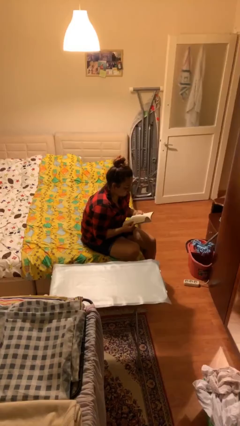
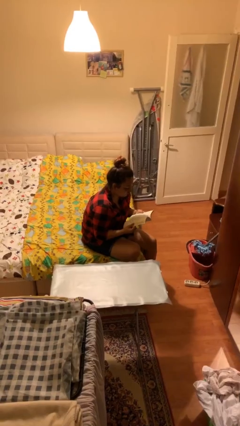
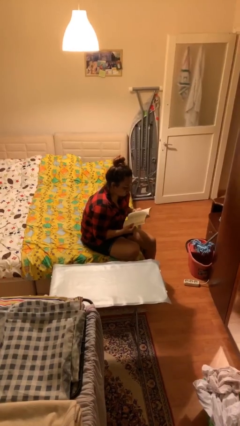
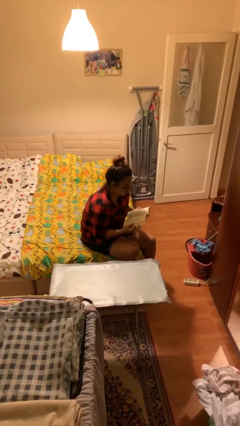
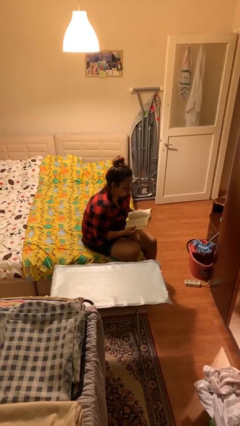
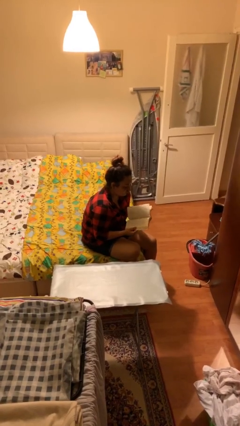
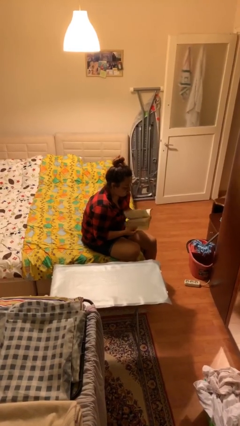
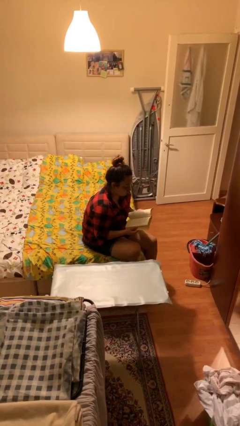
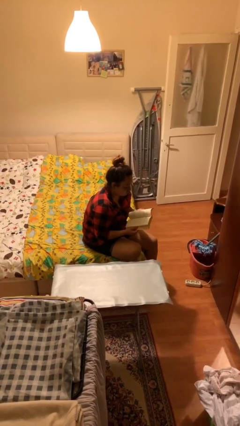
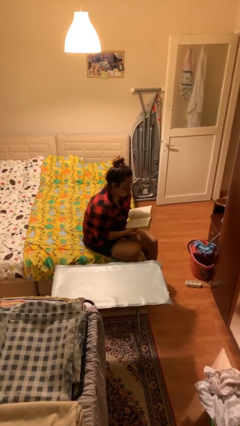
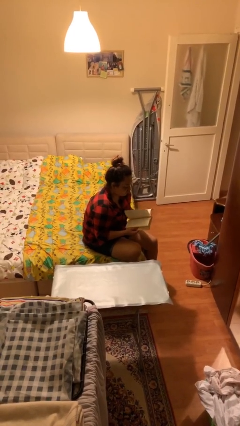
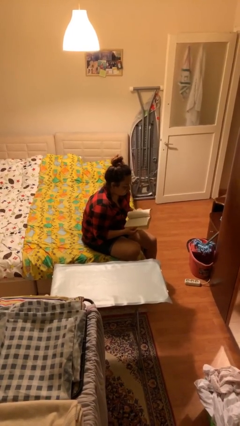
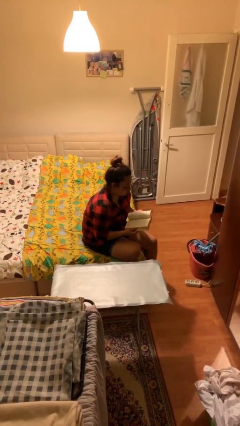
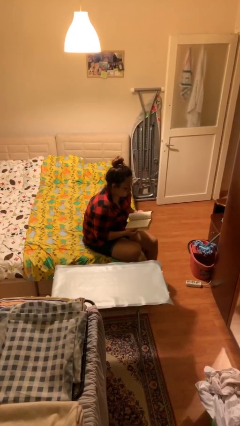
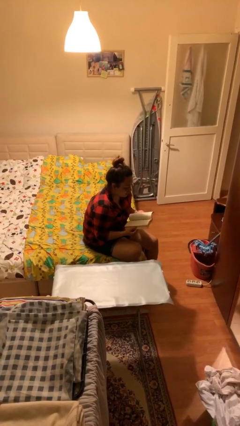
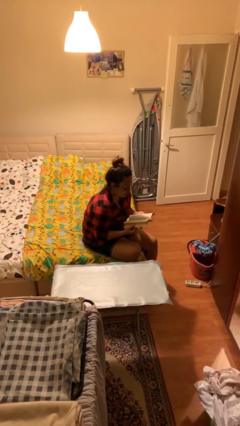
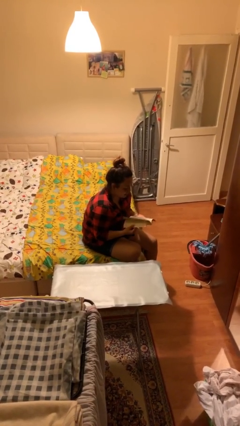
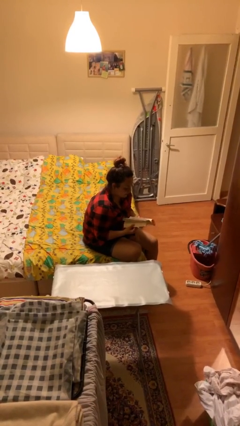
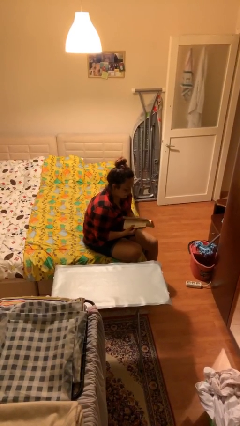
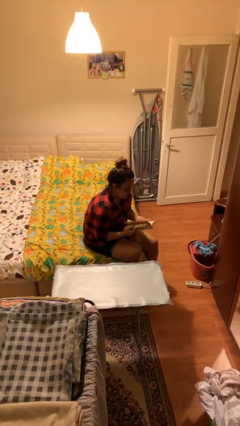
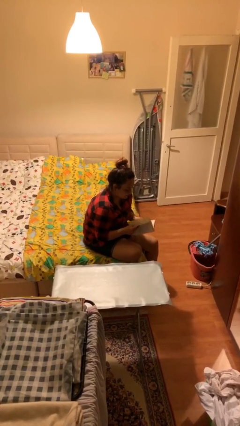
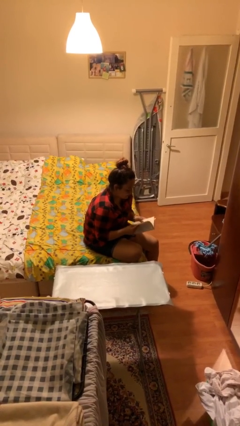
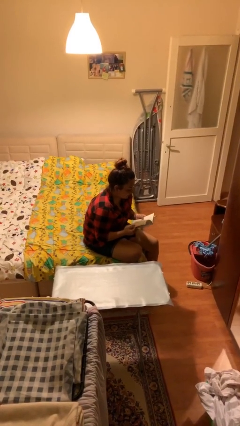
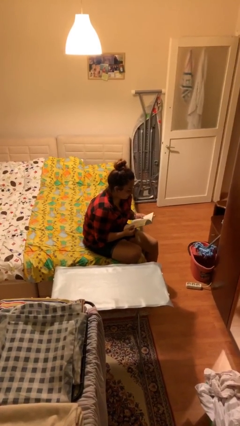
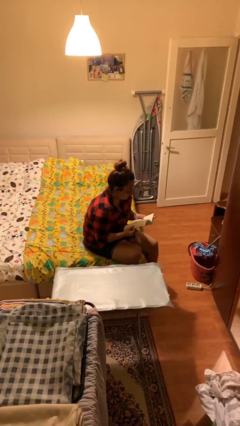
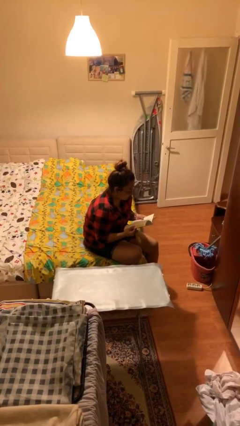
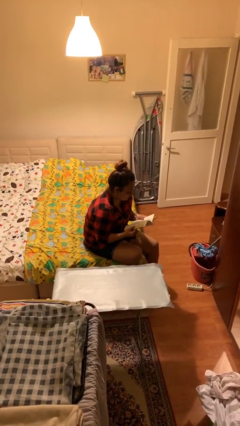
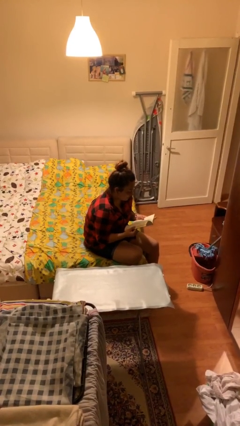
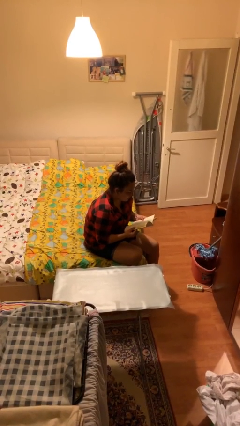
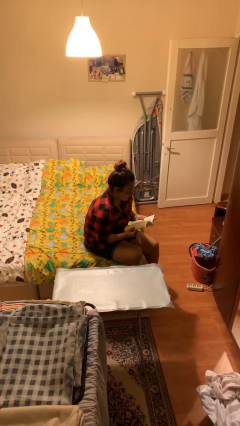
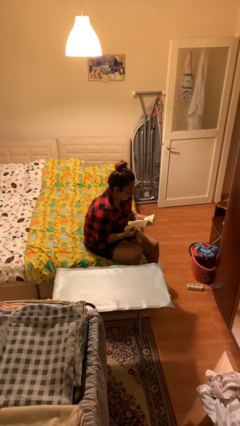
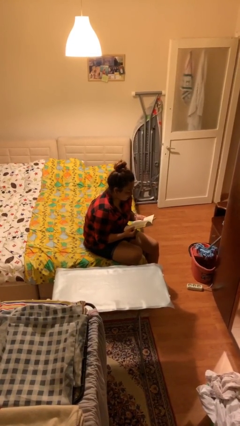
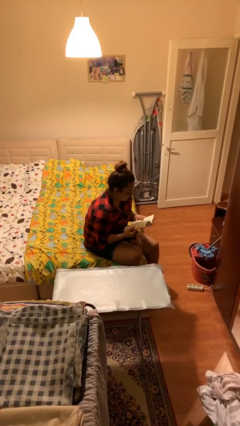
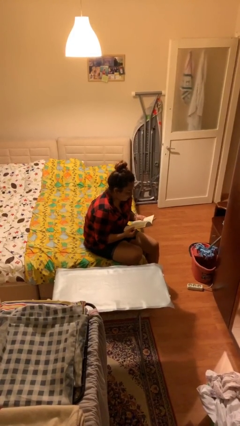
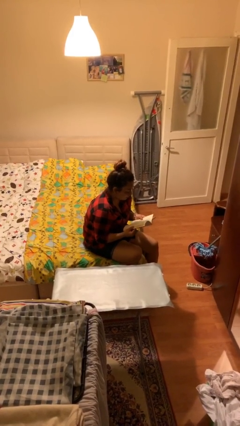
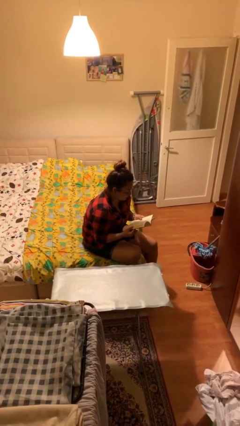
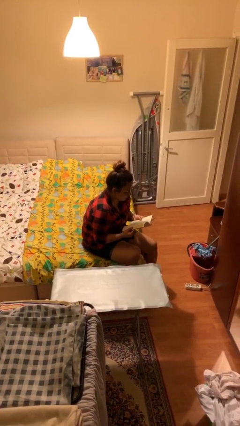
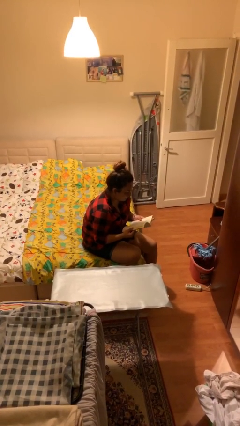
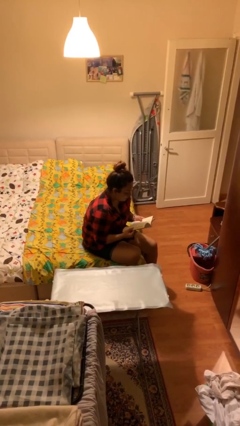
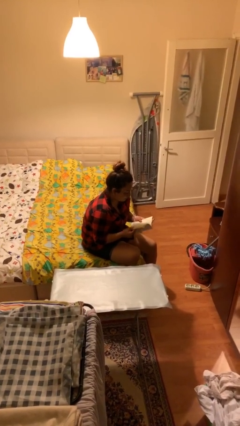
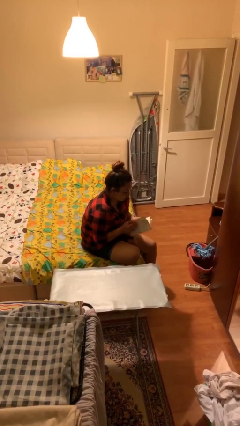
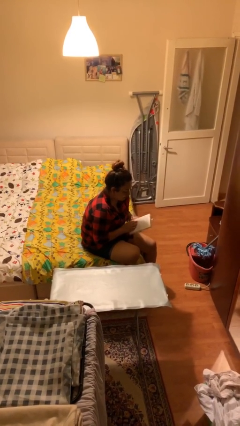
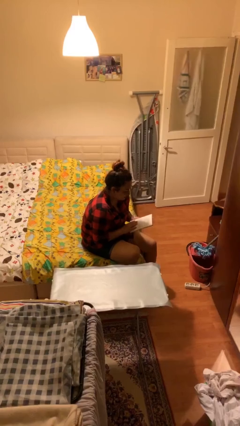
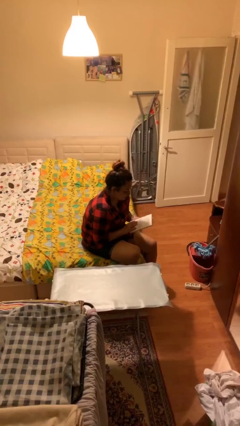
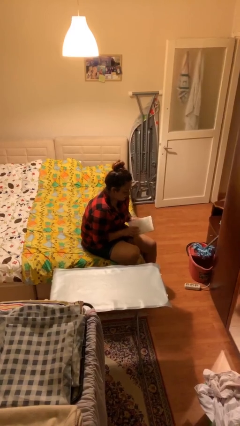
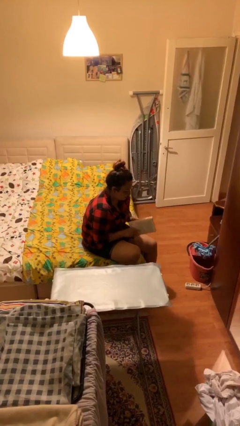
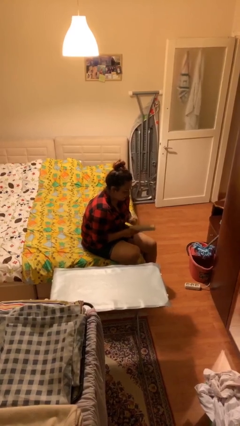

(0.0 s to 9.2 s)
person reads document

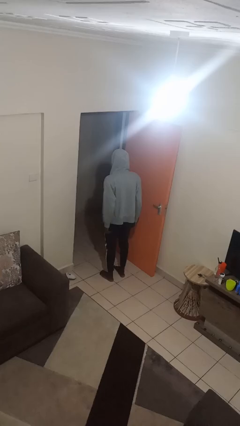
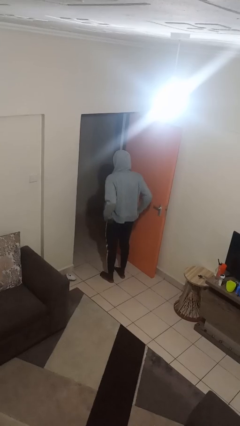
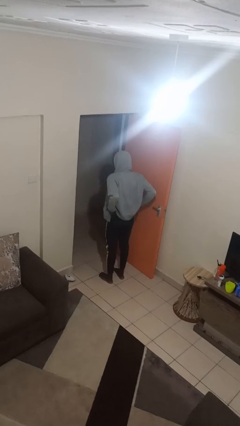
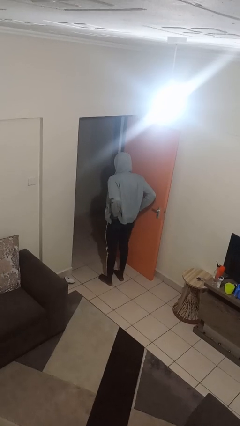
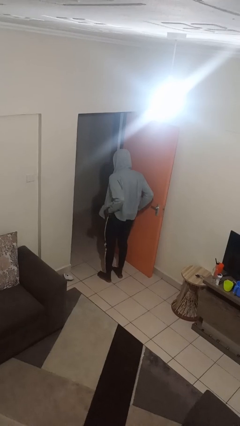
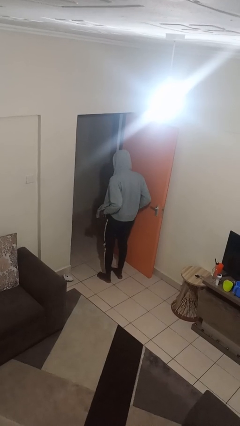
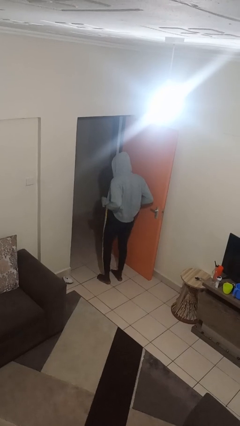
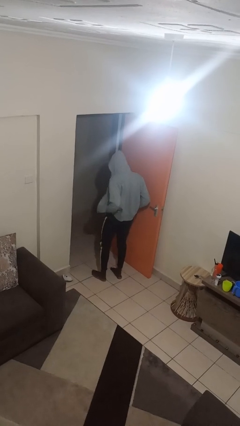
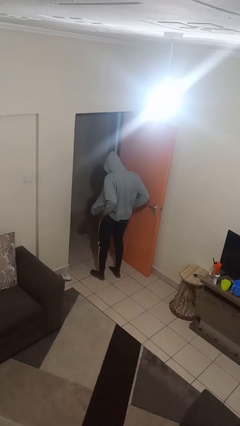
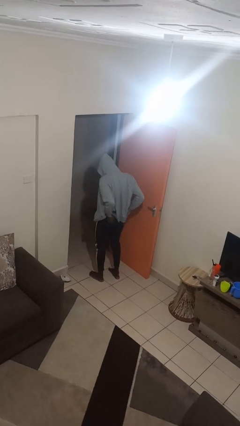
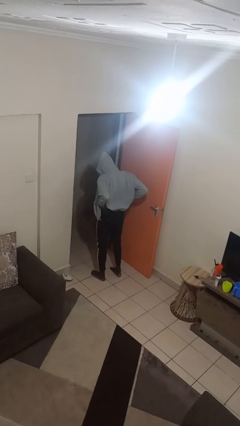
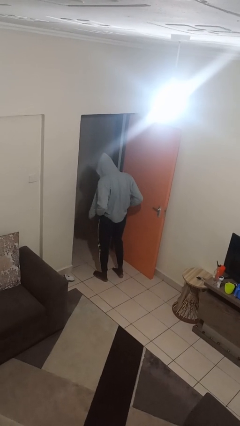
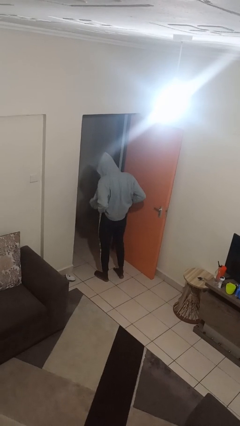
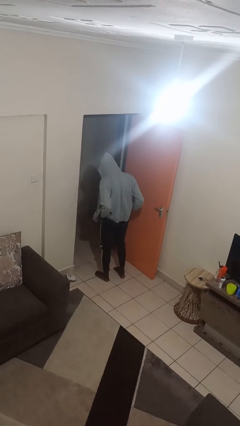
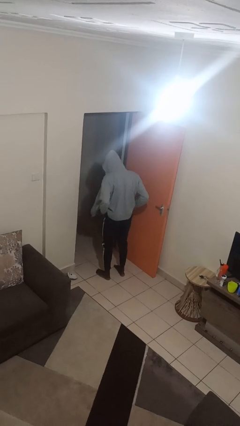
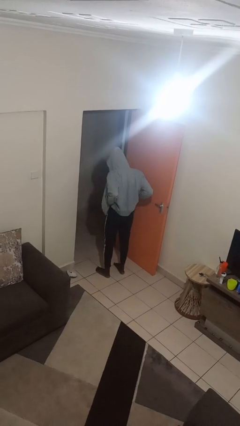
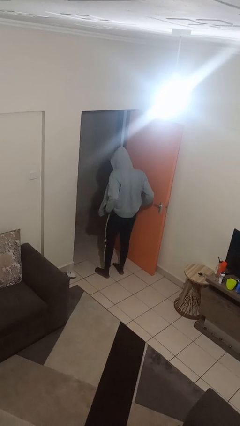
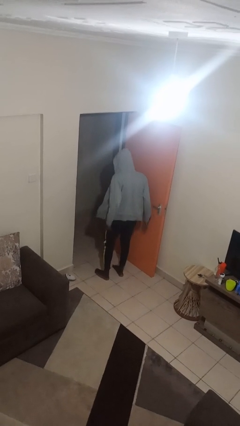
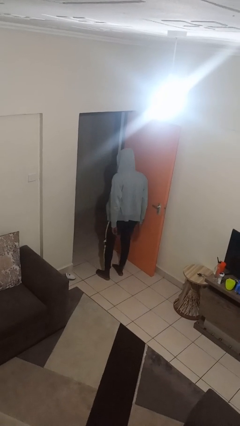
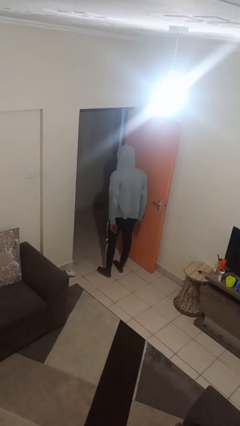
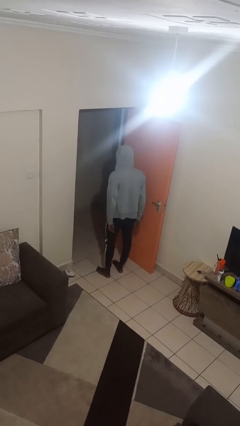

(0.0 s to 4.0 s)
person hikes up pants

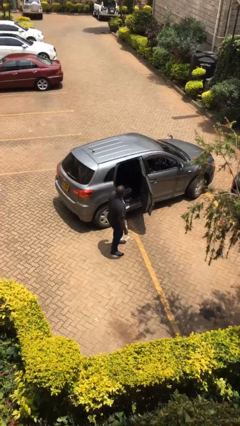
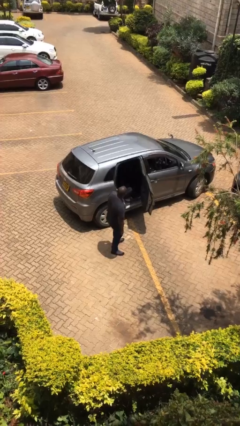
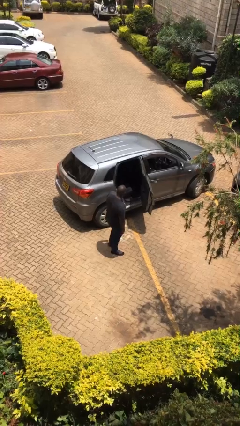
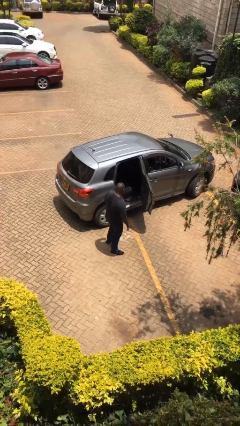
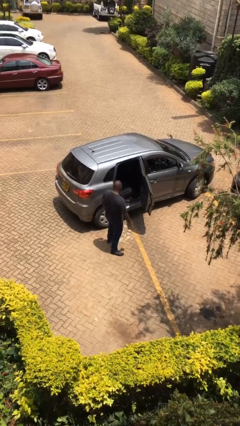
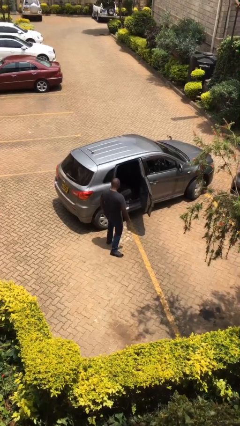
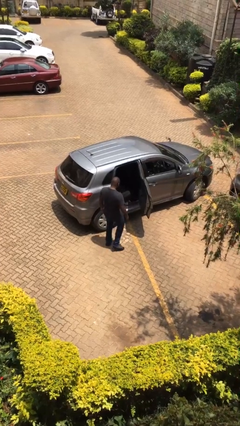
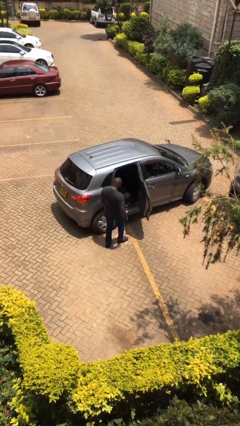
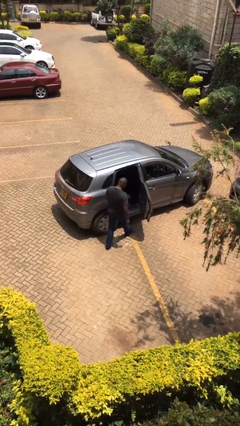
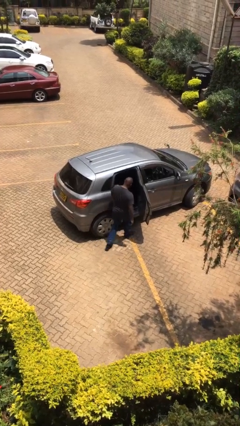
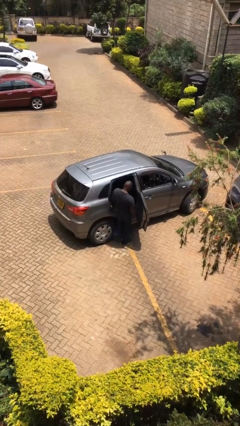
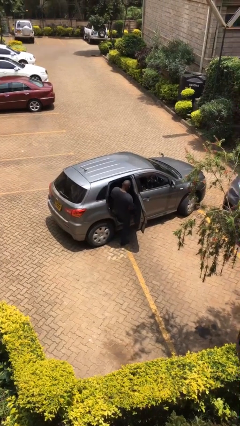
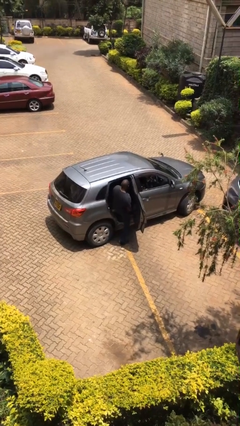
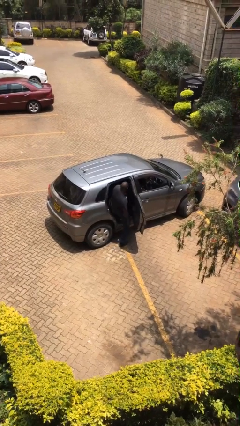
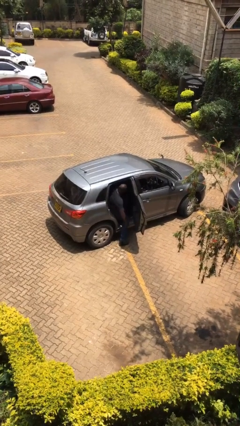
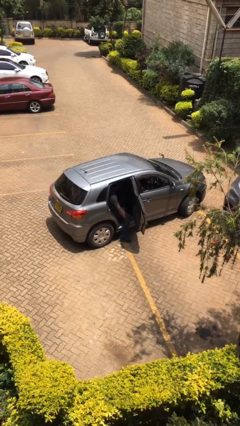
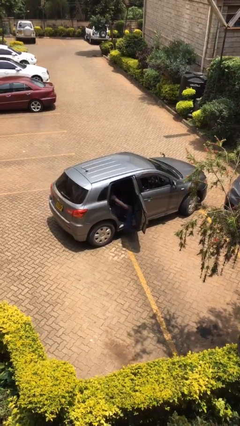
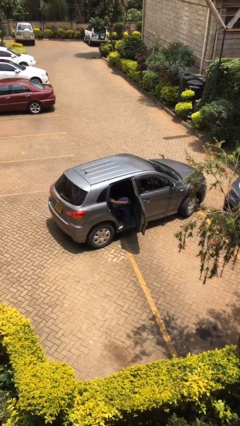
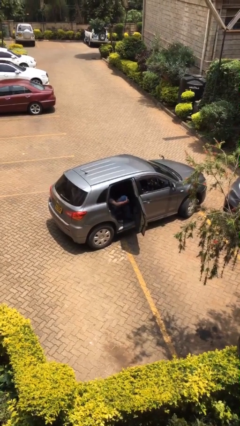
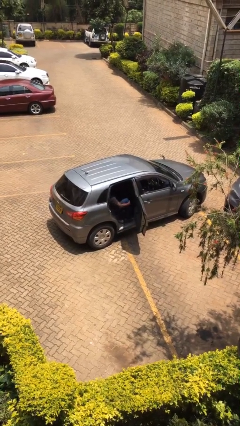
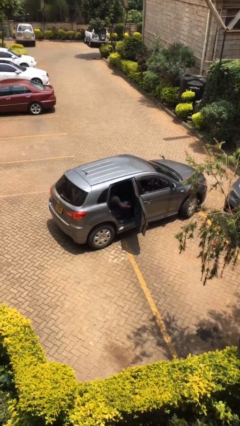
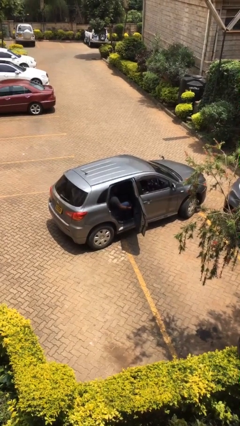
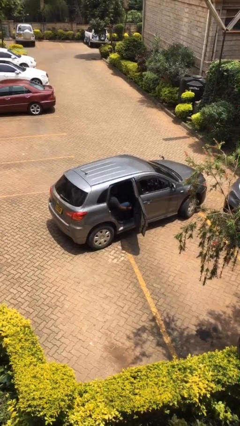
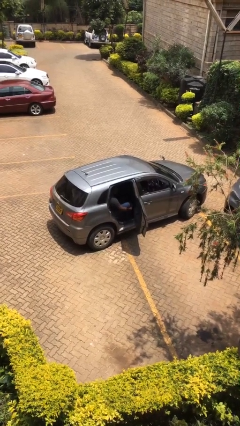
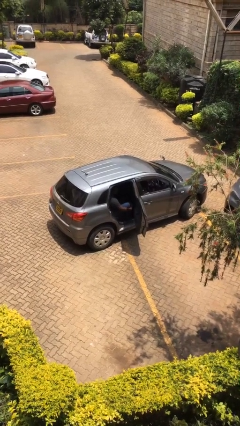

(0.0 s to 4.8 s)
person enters car
